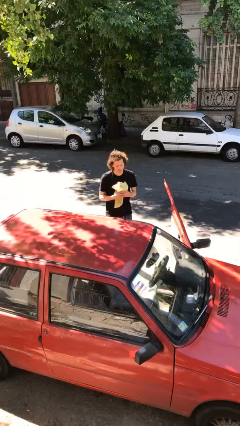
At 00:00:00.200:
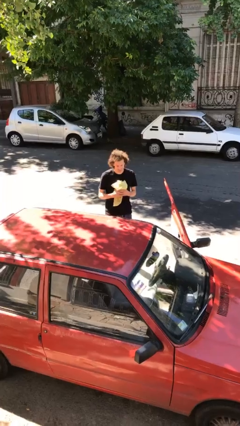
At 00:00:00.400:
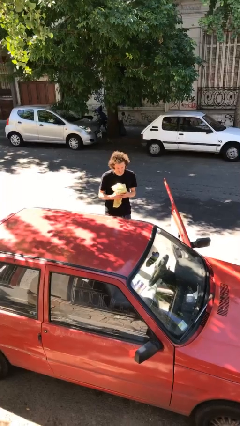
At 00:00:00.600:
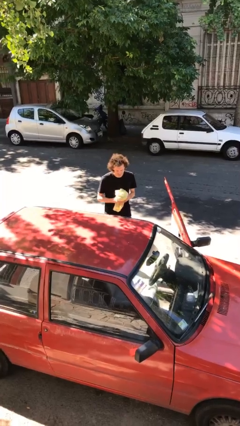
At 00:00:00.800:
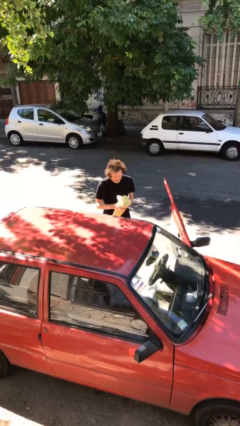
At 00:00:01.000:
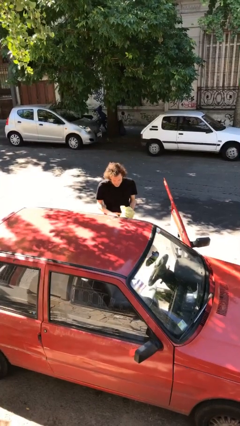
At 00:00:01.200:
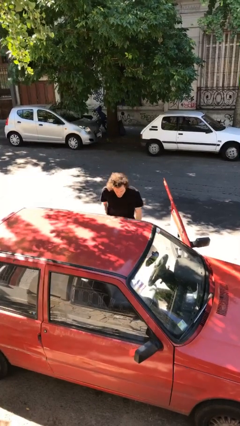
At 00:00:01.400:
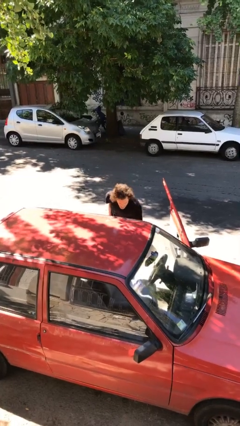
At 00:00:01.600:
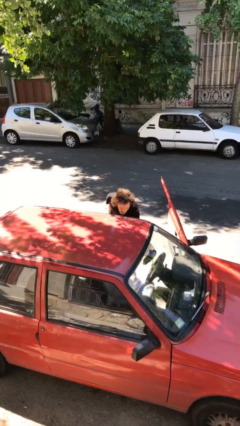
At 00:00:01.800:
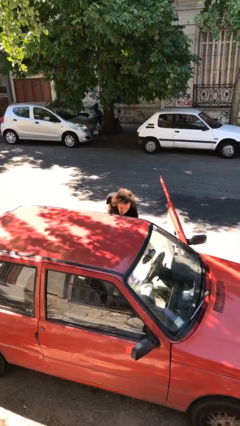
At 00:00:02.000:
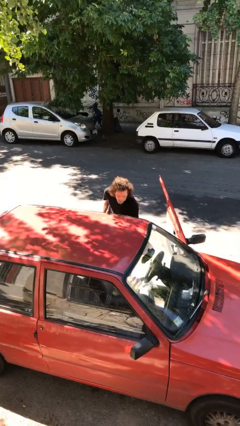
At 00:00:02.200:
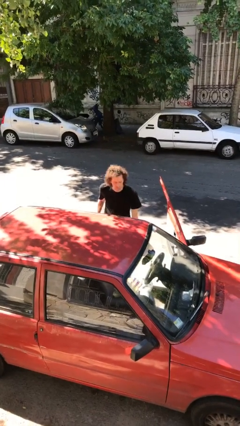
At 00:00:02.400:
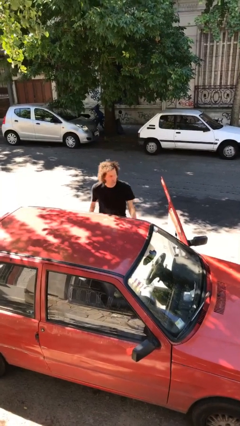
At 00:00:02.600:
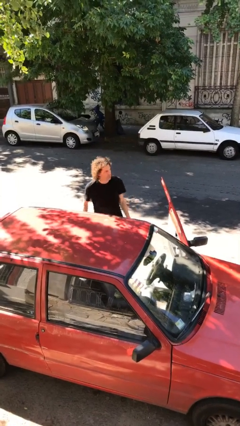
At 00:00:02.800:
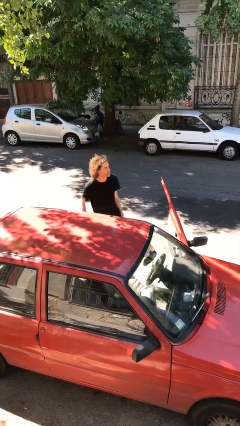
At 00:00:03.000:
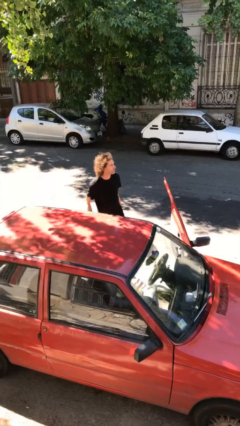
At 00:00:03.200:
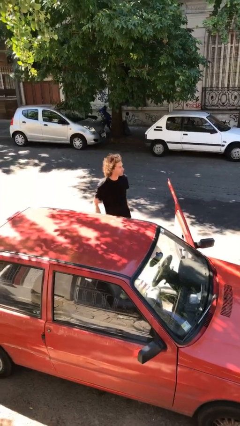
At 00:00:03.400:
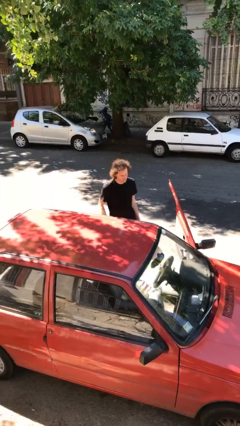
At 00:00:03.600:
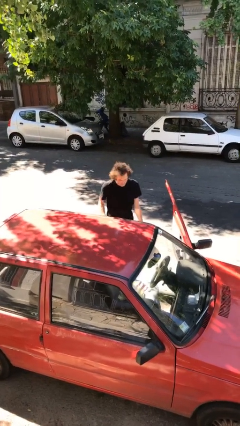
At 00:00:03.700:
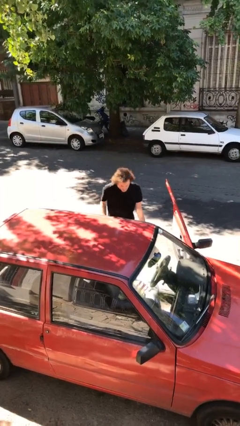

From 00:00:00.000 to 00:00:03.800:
person loads car

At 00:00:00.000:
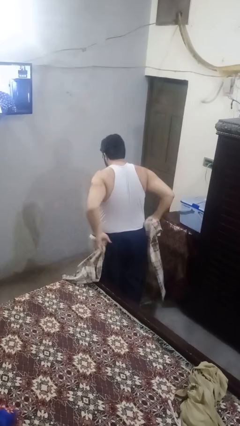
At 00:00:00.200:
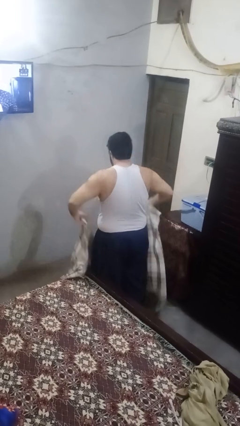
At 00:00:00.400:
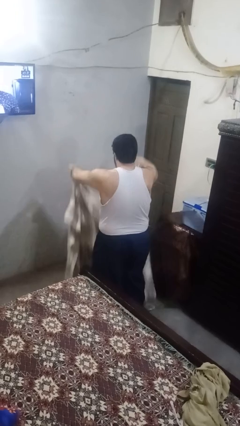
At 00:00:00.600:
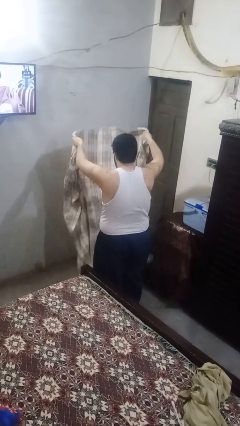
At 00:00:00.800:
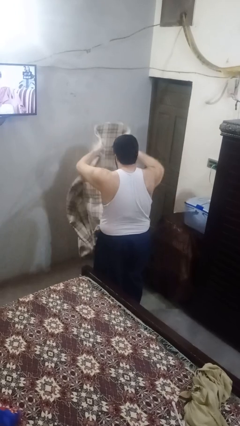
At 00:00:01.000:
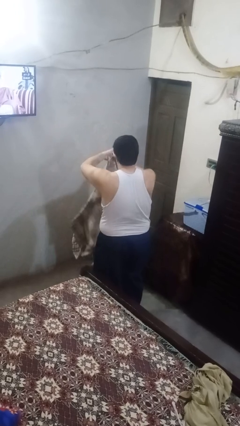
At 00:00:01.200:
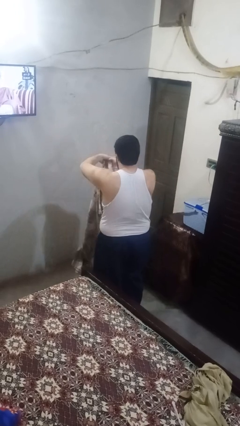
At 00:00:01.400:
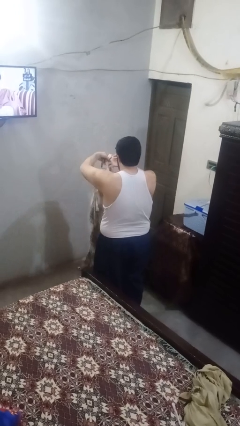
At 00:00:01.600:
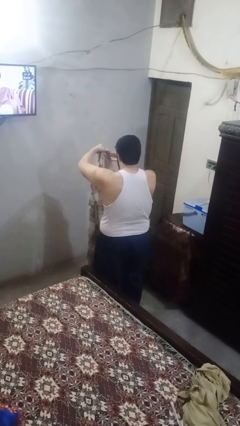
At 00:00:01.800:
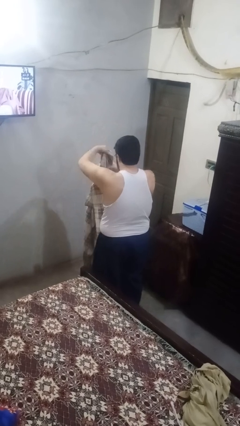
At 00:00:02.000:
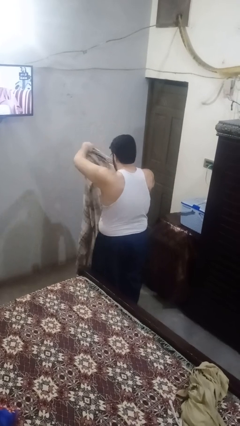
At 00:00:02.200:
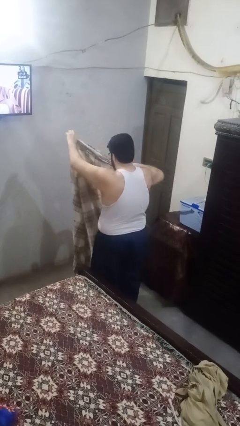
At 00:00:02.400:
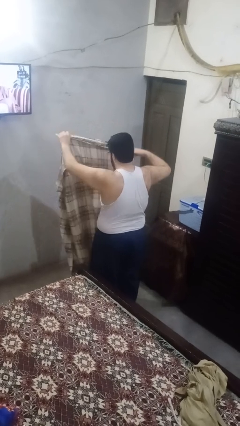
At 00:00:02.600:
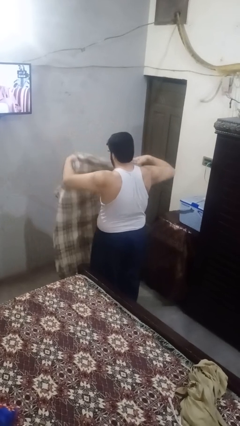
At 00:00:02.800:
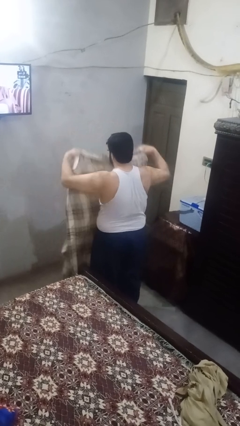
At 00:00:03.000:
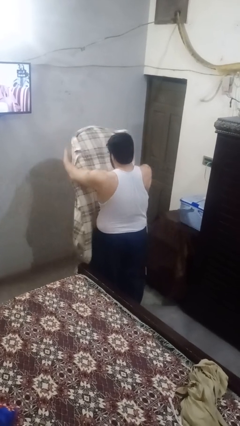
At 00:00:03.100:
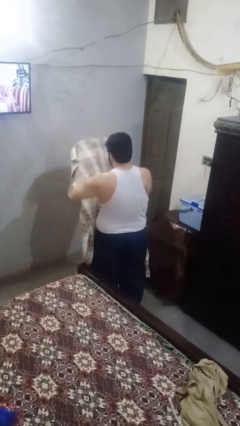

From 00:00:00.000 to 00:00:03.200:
person folds blanket

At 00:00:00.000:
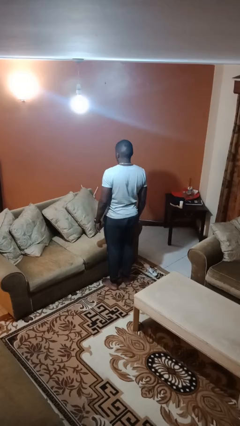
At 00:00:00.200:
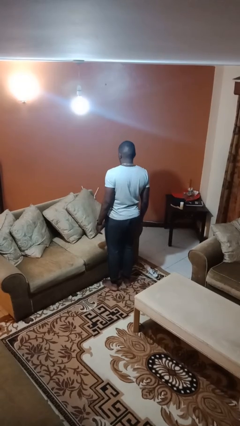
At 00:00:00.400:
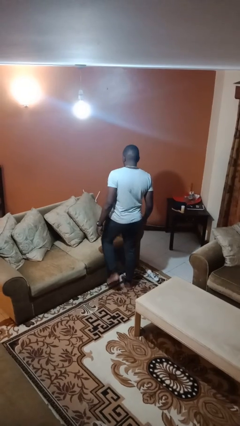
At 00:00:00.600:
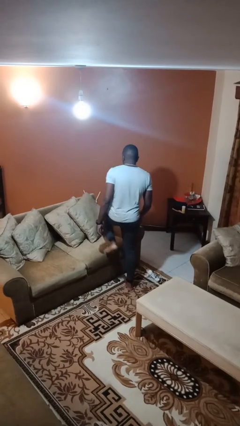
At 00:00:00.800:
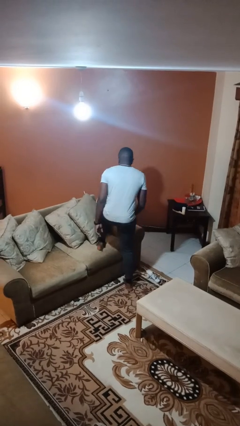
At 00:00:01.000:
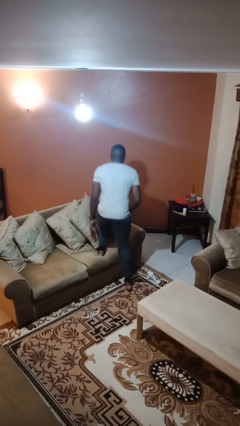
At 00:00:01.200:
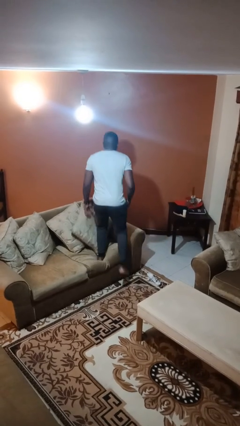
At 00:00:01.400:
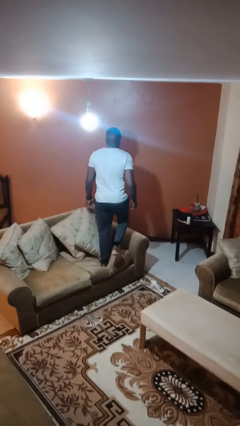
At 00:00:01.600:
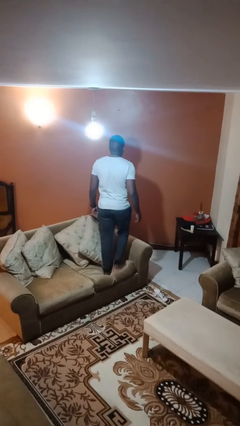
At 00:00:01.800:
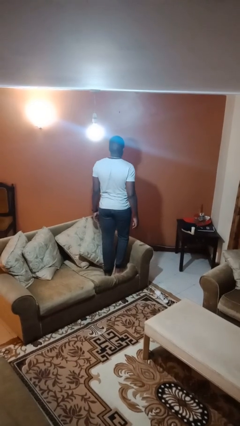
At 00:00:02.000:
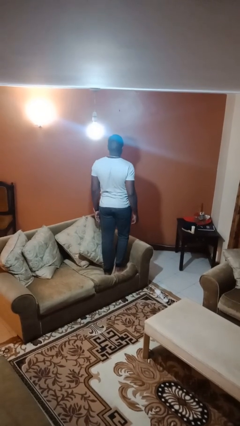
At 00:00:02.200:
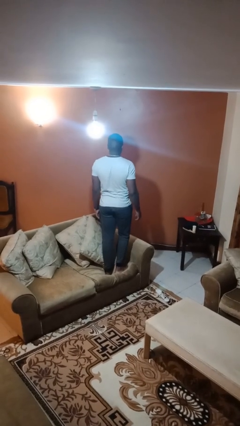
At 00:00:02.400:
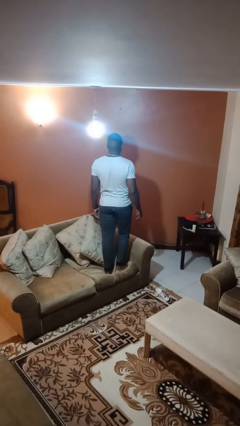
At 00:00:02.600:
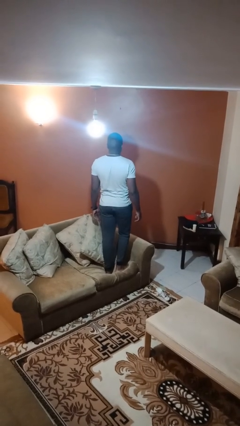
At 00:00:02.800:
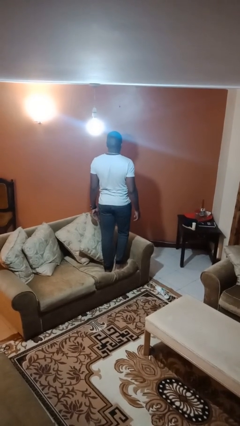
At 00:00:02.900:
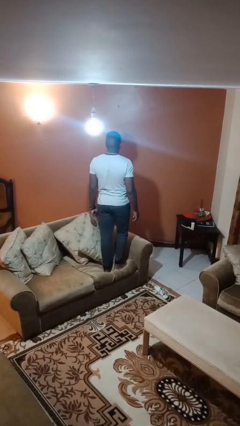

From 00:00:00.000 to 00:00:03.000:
person climbs on couch

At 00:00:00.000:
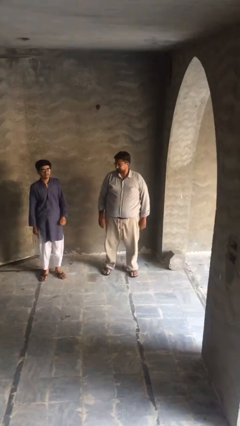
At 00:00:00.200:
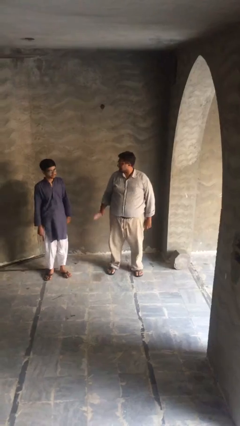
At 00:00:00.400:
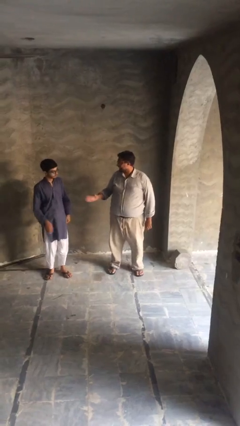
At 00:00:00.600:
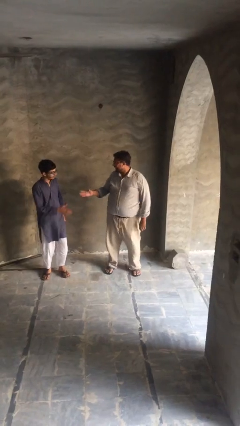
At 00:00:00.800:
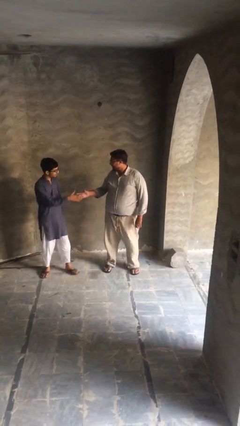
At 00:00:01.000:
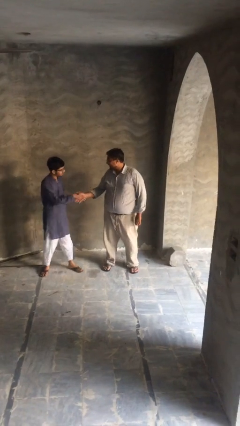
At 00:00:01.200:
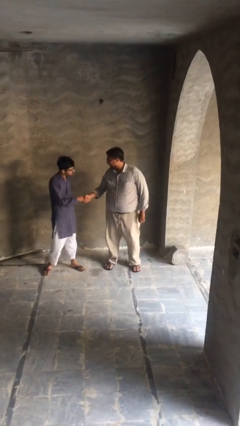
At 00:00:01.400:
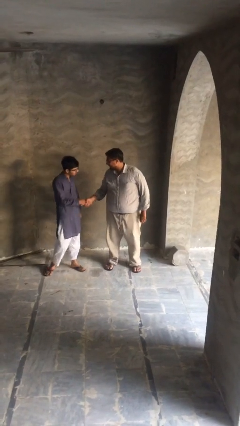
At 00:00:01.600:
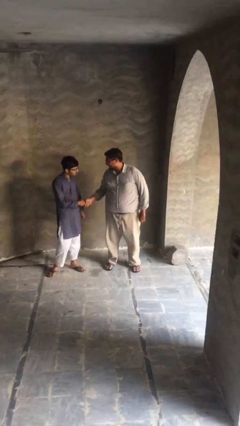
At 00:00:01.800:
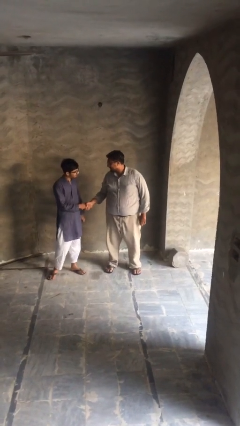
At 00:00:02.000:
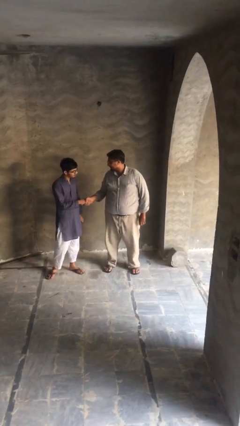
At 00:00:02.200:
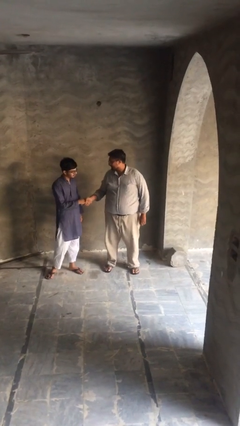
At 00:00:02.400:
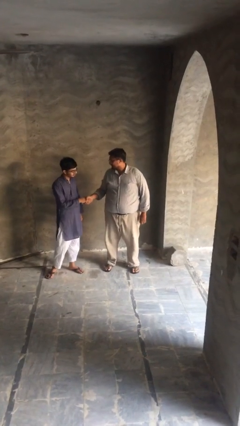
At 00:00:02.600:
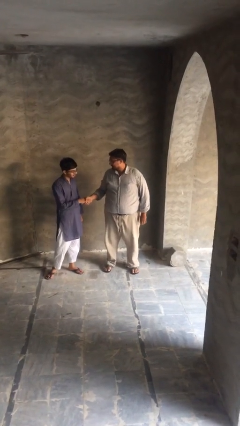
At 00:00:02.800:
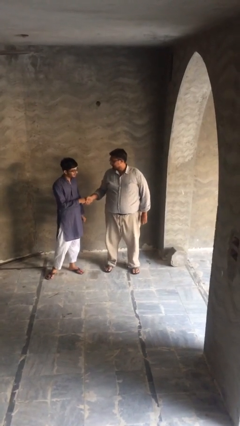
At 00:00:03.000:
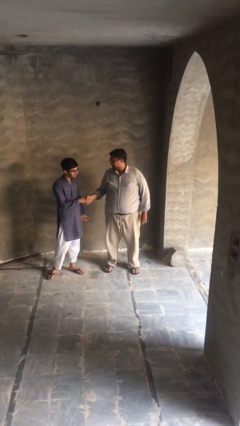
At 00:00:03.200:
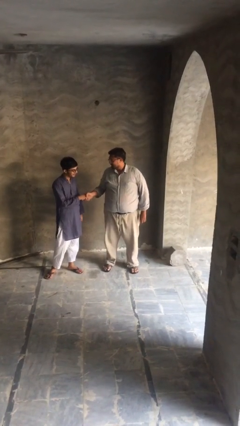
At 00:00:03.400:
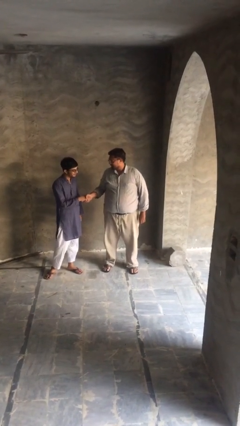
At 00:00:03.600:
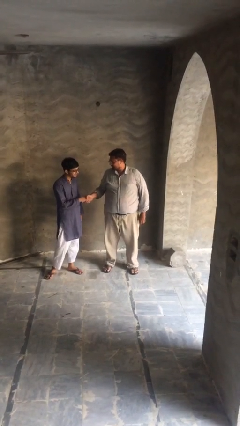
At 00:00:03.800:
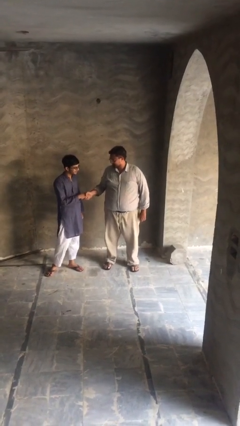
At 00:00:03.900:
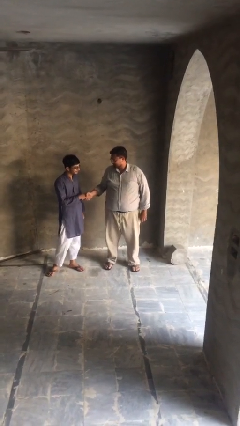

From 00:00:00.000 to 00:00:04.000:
person shakes hand

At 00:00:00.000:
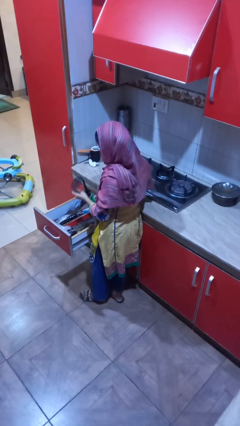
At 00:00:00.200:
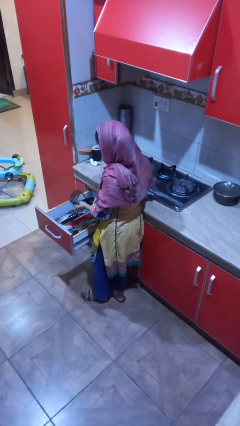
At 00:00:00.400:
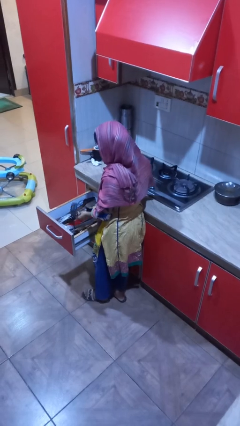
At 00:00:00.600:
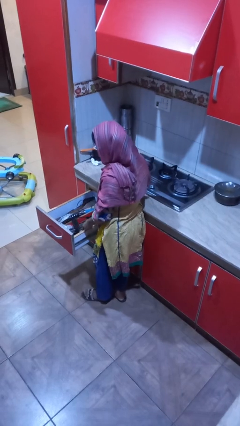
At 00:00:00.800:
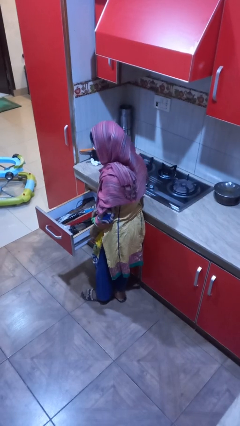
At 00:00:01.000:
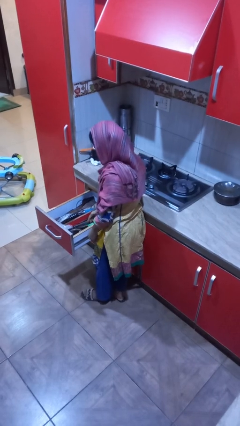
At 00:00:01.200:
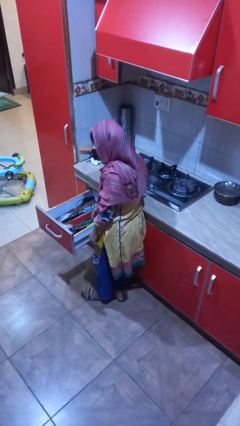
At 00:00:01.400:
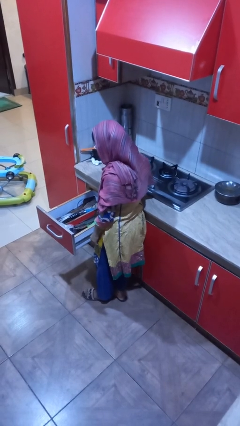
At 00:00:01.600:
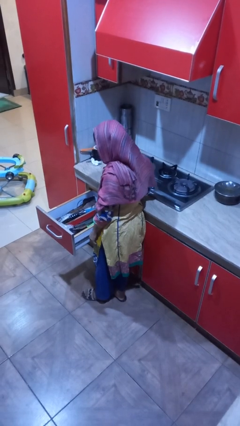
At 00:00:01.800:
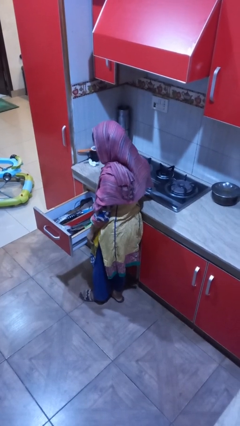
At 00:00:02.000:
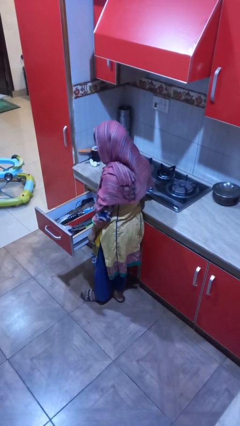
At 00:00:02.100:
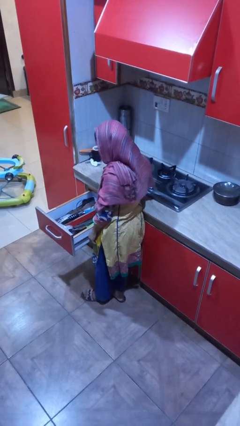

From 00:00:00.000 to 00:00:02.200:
person puts object into kitchen drawer

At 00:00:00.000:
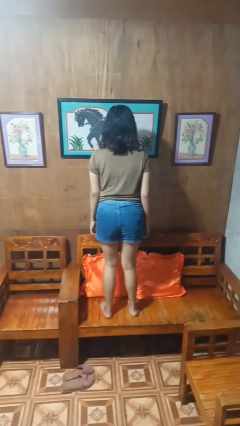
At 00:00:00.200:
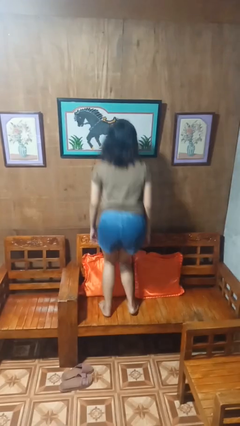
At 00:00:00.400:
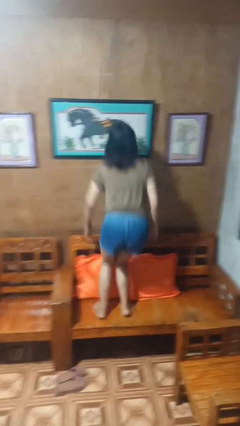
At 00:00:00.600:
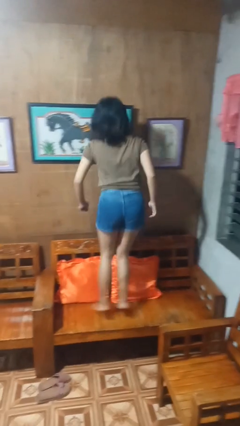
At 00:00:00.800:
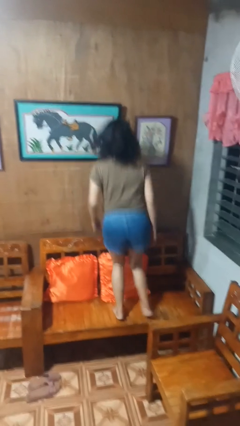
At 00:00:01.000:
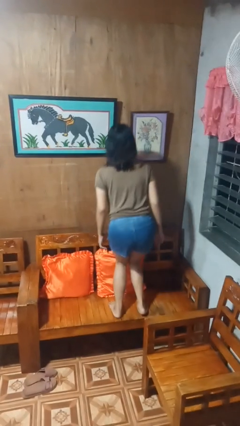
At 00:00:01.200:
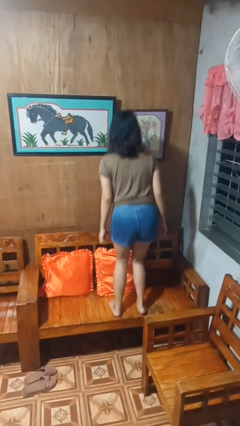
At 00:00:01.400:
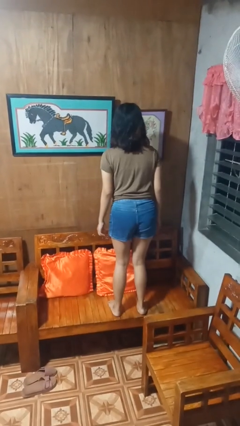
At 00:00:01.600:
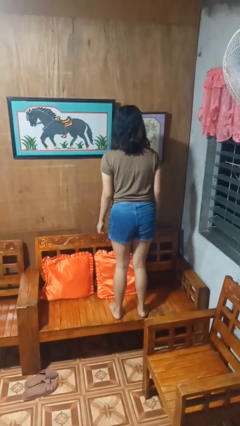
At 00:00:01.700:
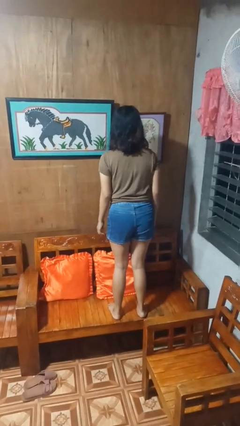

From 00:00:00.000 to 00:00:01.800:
person jumps on couch
